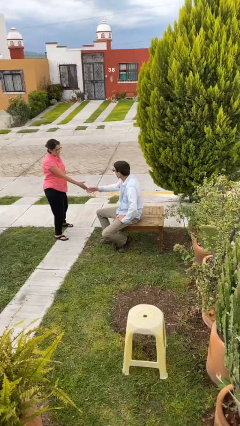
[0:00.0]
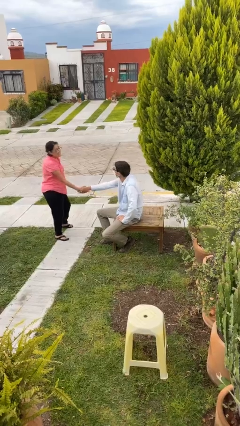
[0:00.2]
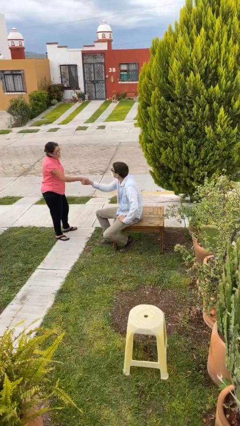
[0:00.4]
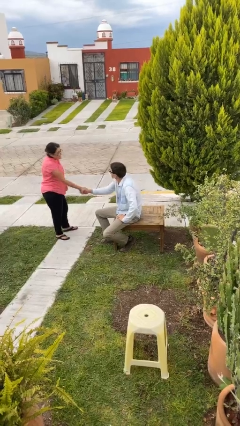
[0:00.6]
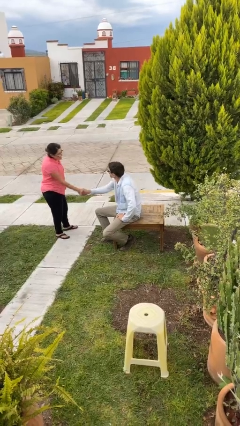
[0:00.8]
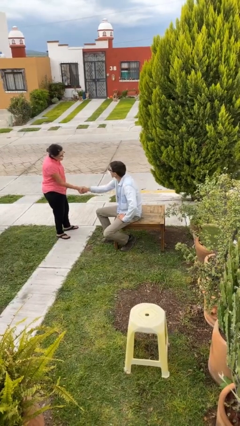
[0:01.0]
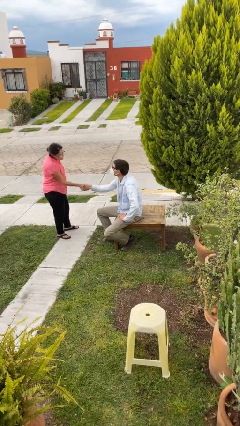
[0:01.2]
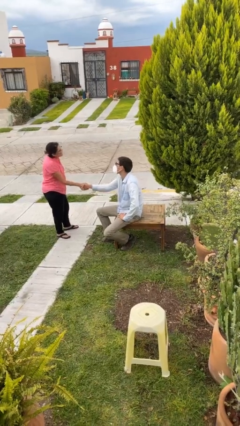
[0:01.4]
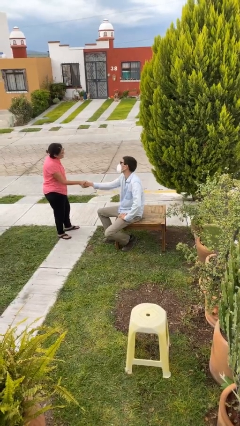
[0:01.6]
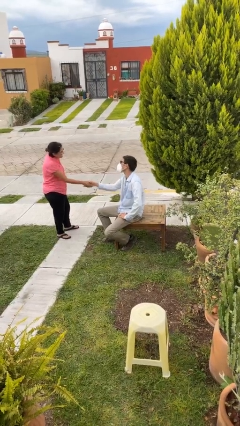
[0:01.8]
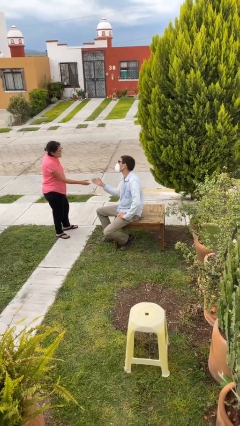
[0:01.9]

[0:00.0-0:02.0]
person shakes hand

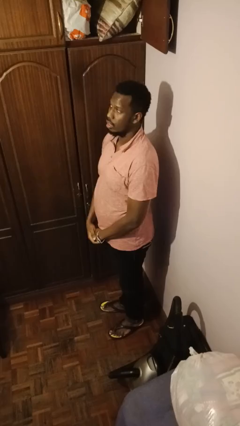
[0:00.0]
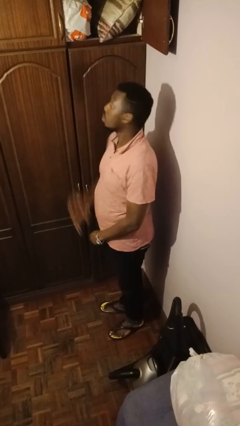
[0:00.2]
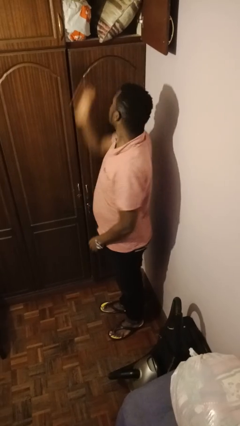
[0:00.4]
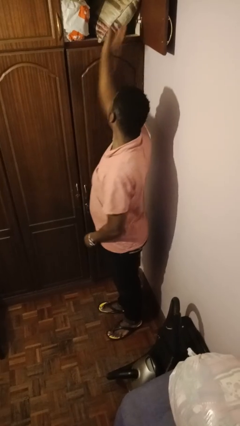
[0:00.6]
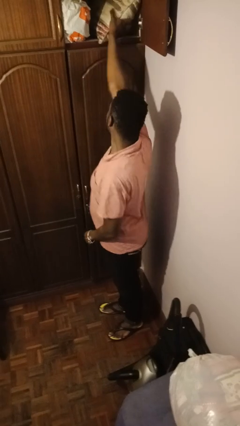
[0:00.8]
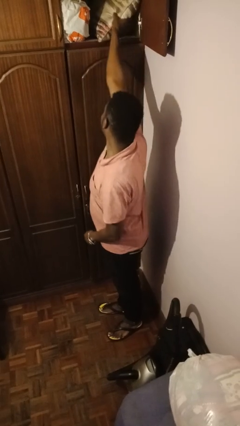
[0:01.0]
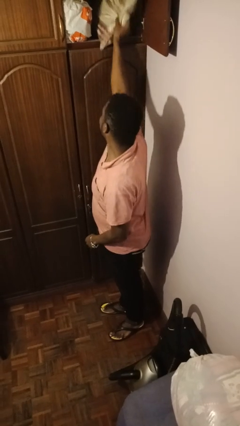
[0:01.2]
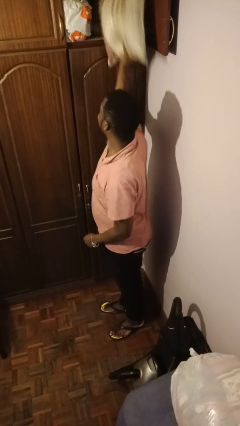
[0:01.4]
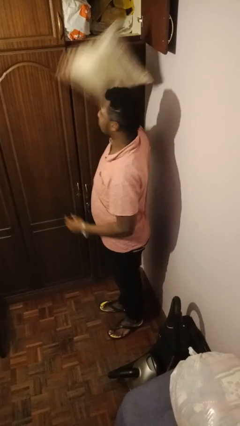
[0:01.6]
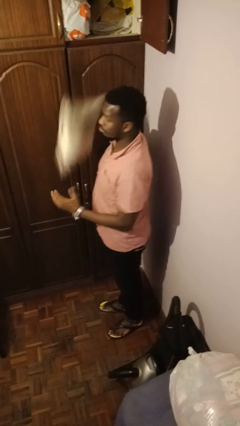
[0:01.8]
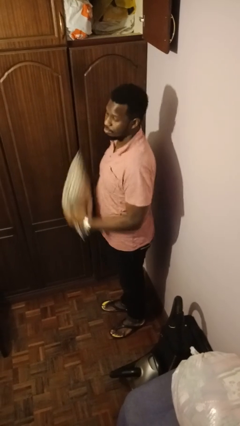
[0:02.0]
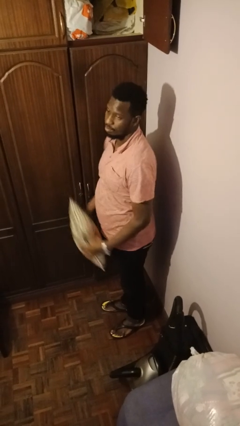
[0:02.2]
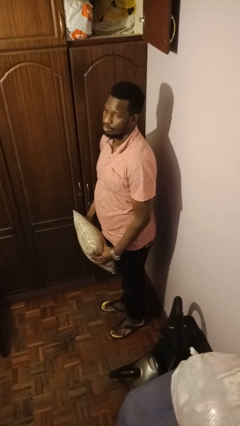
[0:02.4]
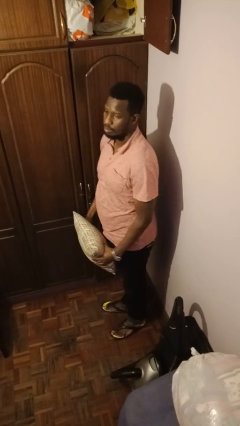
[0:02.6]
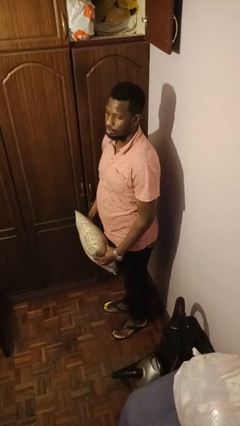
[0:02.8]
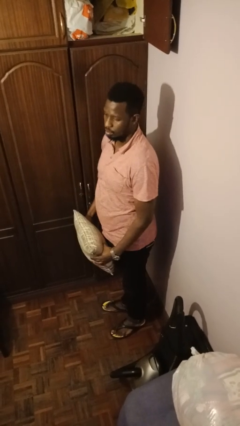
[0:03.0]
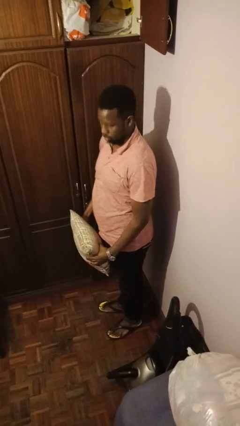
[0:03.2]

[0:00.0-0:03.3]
person picks up object from shelf

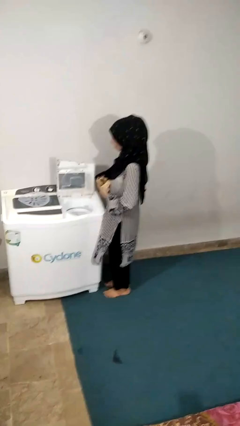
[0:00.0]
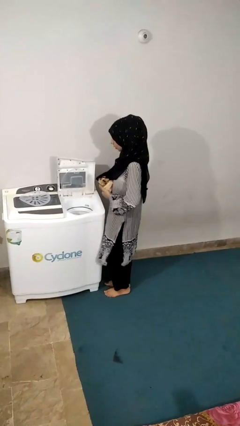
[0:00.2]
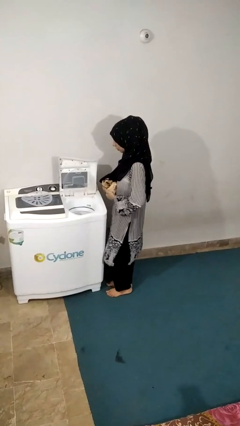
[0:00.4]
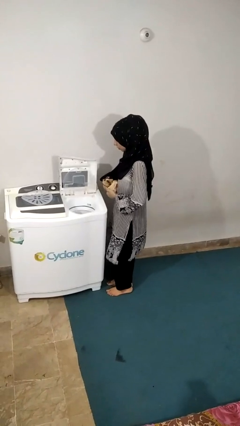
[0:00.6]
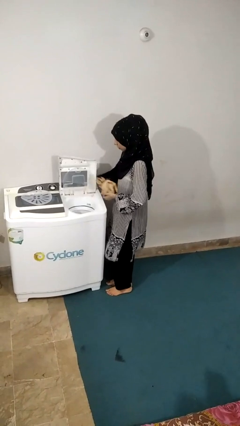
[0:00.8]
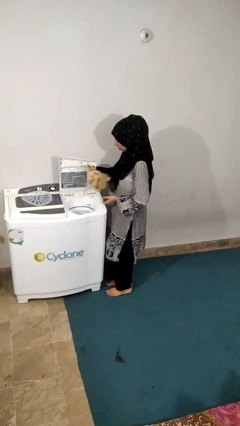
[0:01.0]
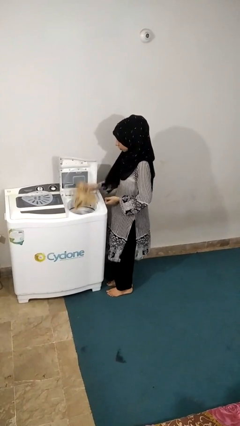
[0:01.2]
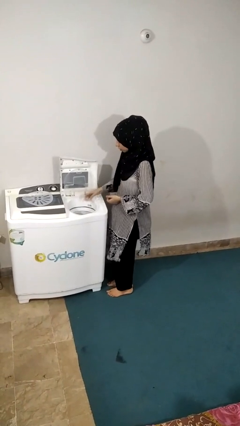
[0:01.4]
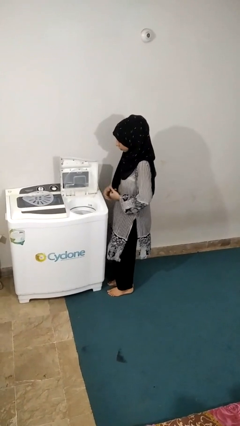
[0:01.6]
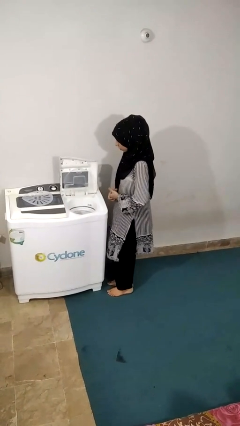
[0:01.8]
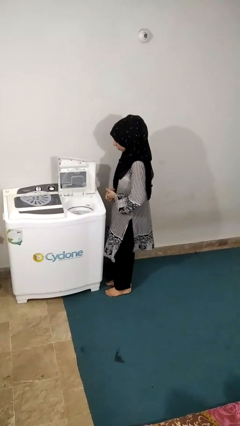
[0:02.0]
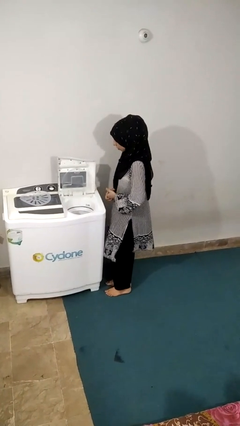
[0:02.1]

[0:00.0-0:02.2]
person loads dryer

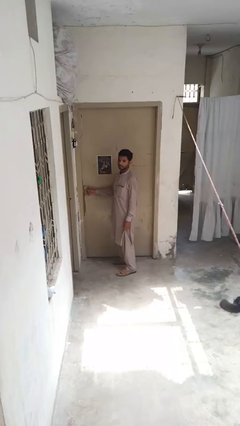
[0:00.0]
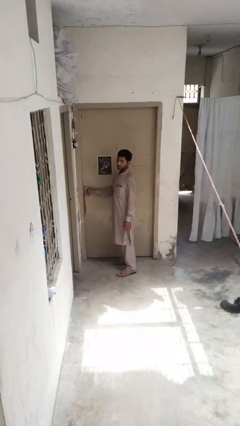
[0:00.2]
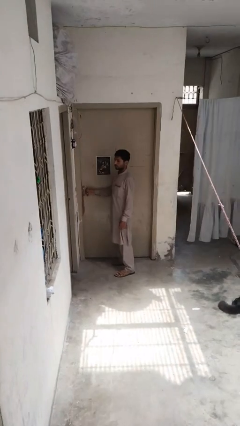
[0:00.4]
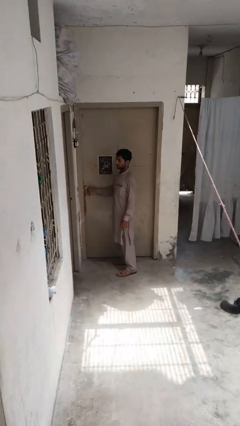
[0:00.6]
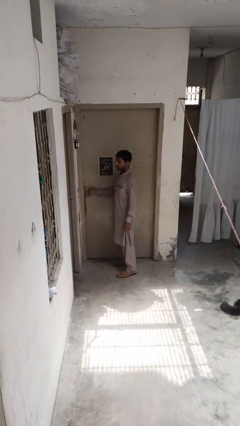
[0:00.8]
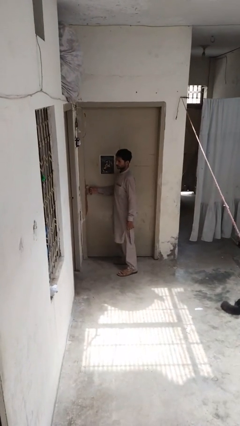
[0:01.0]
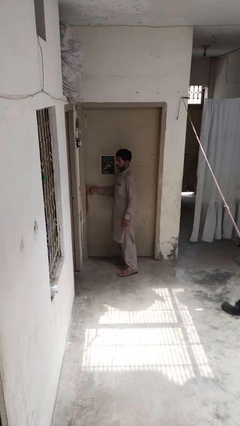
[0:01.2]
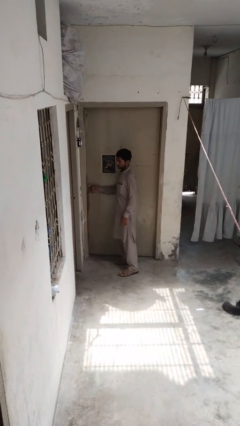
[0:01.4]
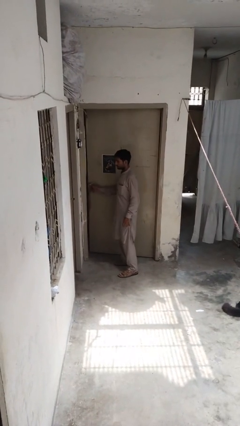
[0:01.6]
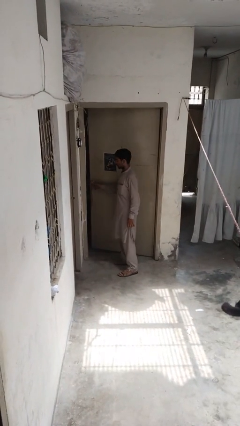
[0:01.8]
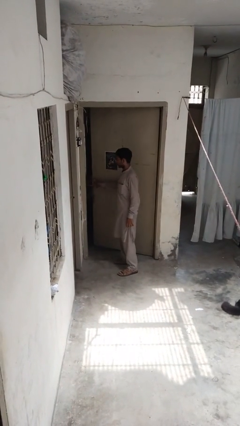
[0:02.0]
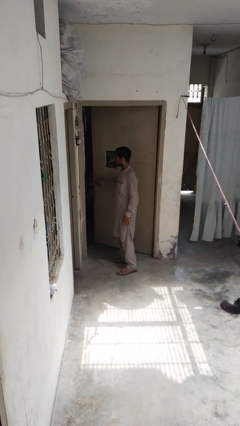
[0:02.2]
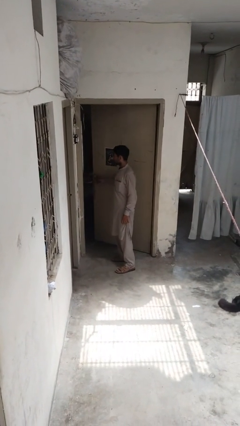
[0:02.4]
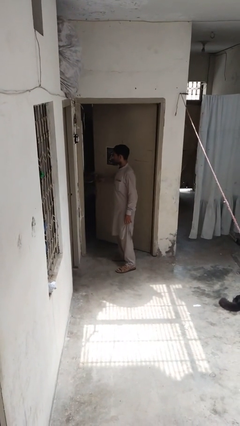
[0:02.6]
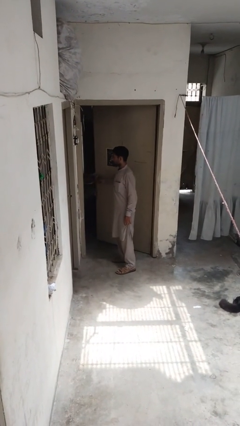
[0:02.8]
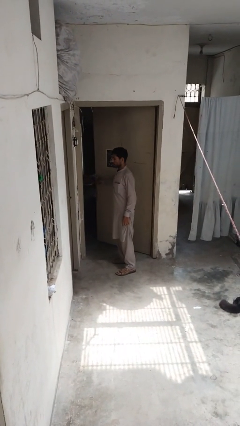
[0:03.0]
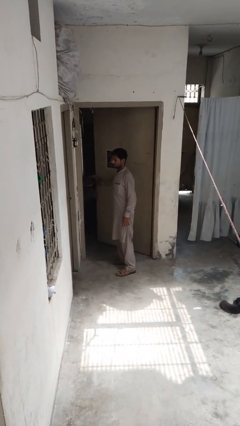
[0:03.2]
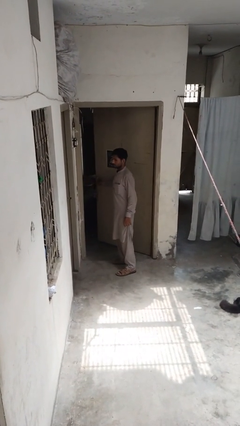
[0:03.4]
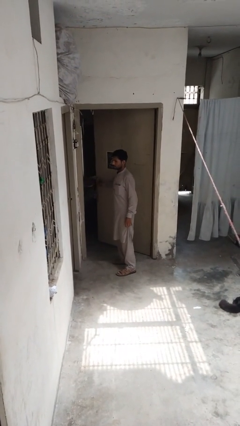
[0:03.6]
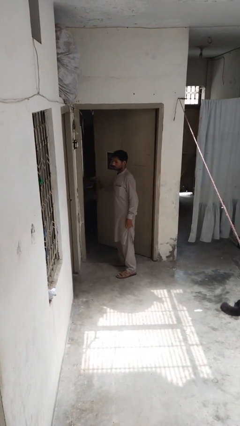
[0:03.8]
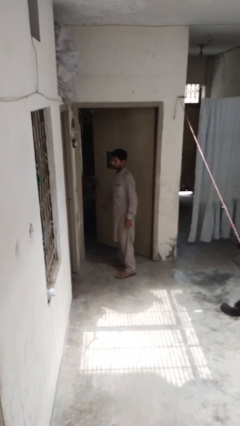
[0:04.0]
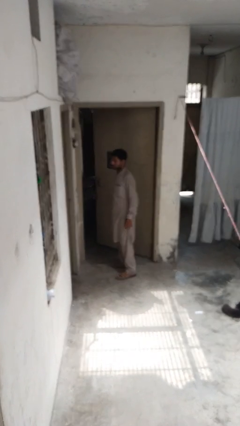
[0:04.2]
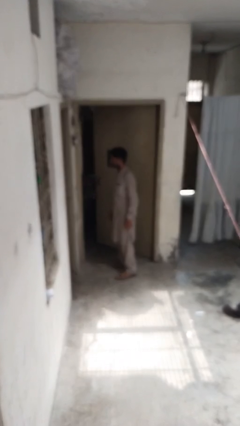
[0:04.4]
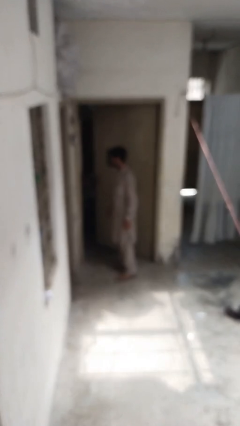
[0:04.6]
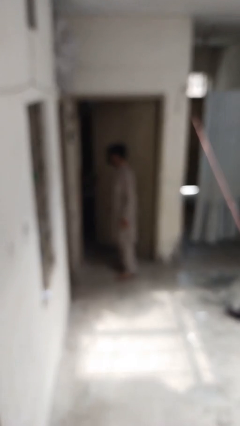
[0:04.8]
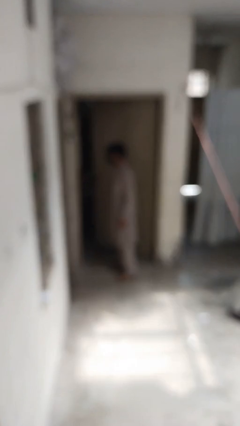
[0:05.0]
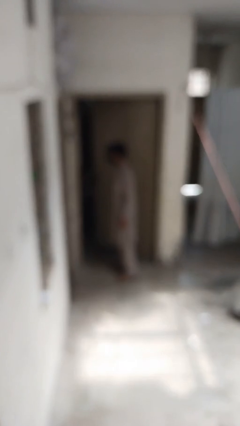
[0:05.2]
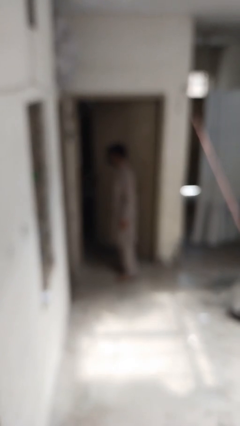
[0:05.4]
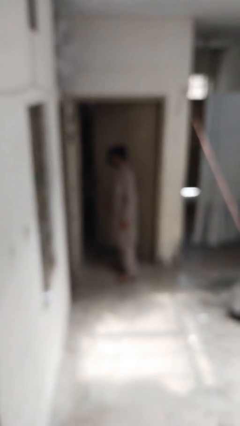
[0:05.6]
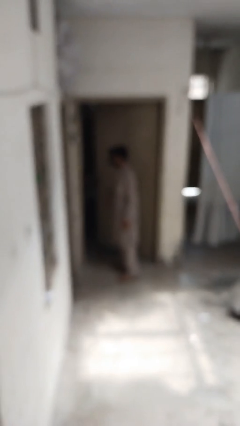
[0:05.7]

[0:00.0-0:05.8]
person opens gate

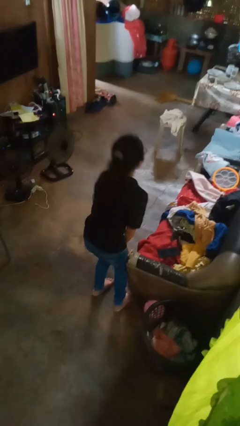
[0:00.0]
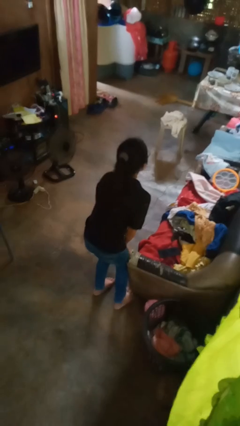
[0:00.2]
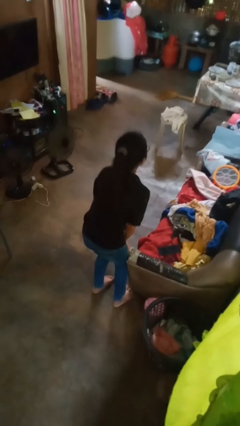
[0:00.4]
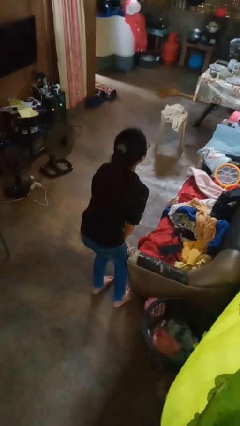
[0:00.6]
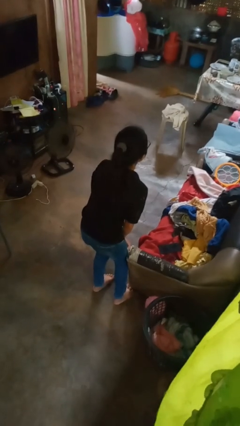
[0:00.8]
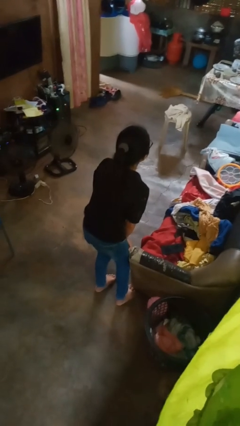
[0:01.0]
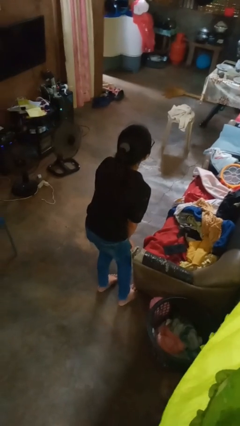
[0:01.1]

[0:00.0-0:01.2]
person stubs toe

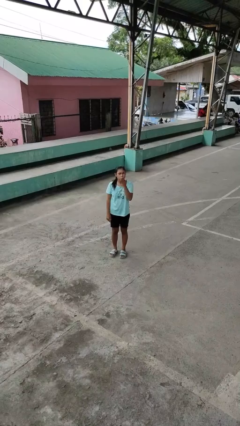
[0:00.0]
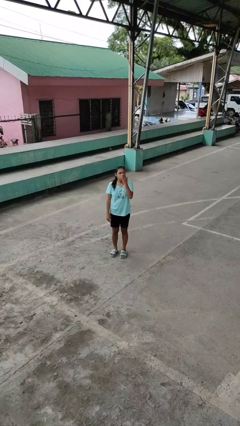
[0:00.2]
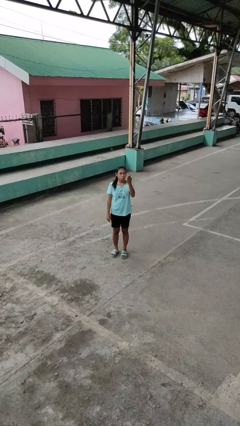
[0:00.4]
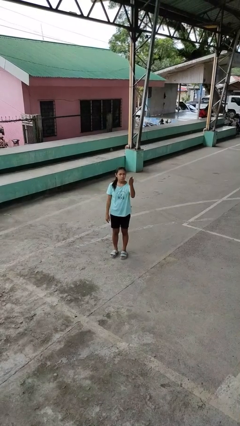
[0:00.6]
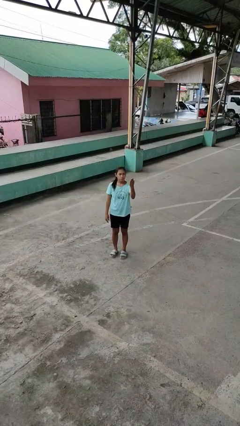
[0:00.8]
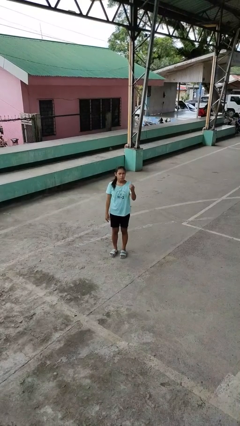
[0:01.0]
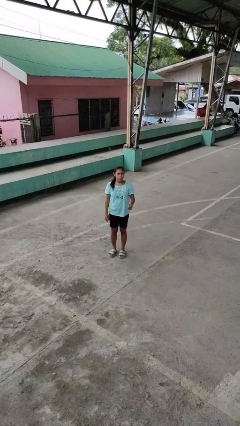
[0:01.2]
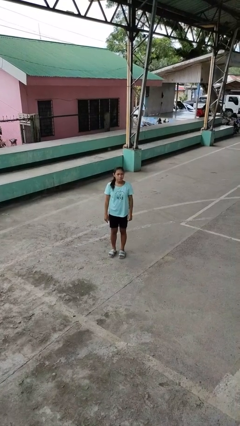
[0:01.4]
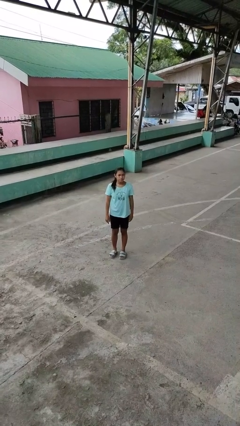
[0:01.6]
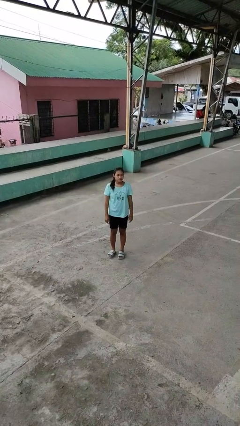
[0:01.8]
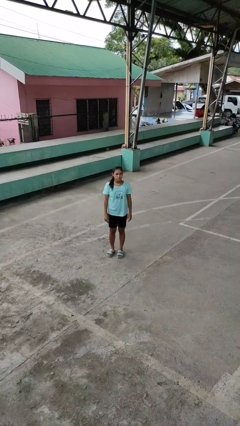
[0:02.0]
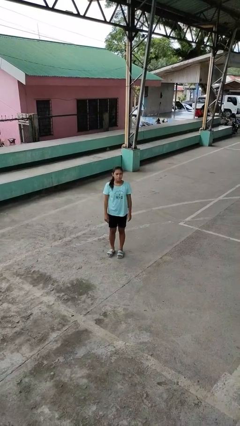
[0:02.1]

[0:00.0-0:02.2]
person gestures blow kiss

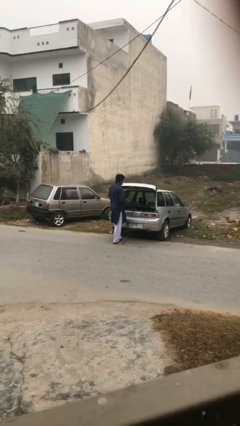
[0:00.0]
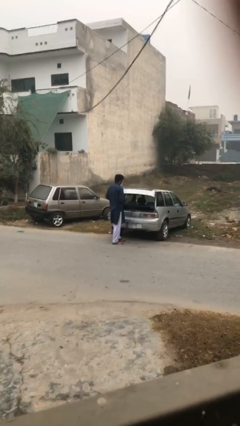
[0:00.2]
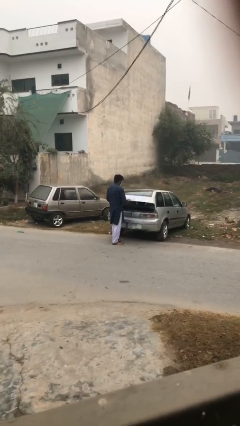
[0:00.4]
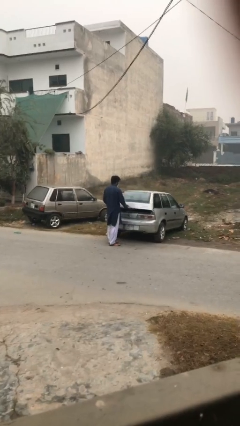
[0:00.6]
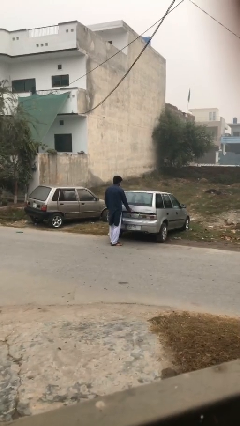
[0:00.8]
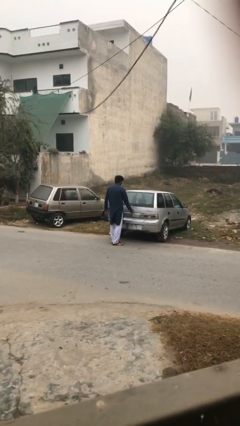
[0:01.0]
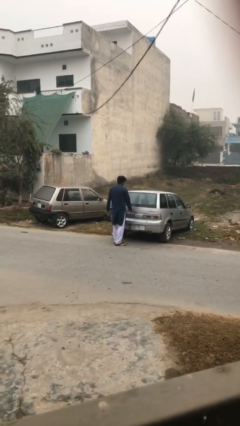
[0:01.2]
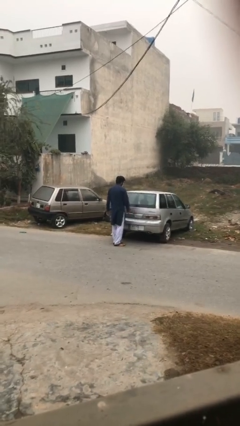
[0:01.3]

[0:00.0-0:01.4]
person closes car trunk
